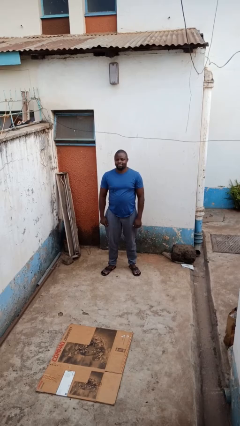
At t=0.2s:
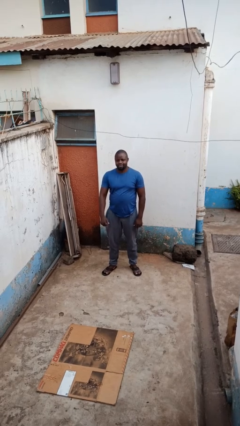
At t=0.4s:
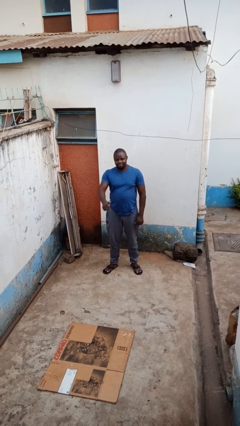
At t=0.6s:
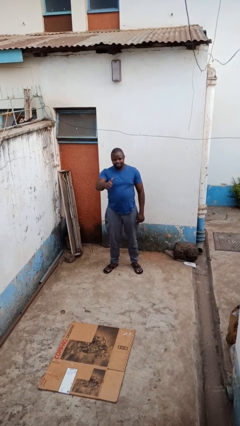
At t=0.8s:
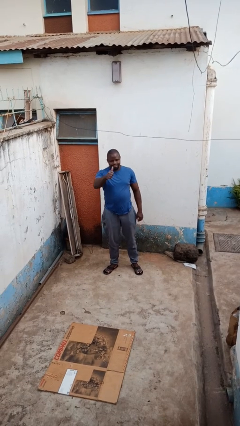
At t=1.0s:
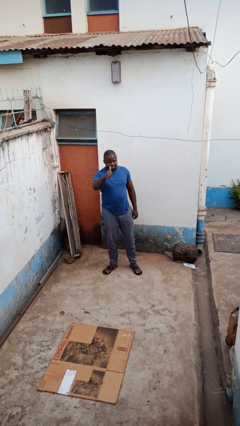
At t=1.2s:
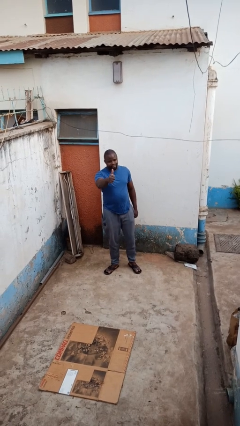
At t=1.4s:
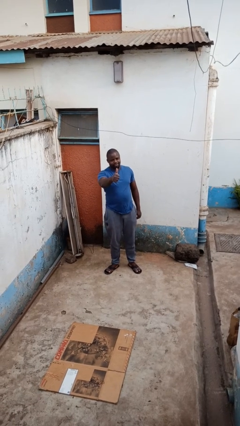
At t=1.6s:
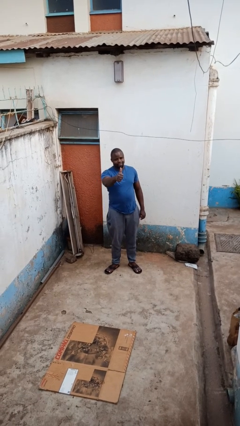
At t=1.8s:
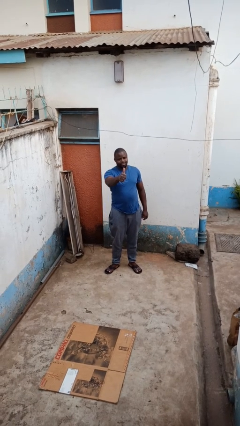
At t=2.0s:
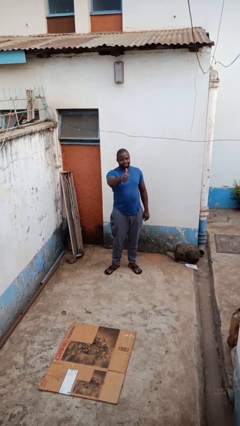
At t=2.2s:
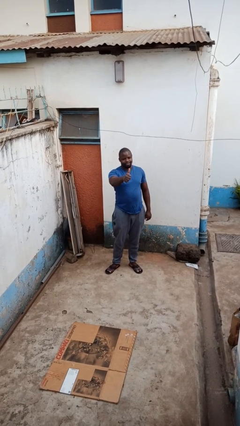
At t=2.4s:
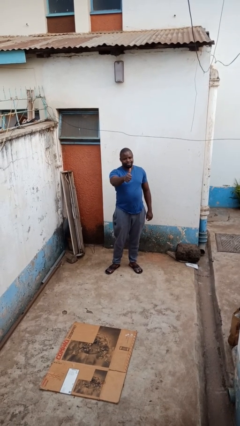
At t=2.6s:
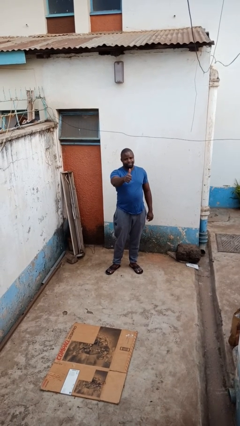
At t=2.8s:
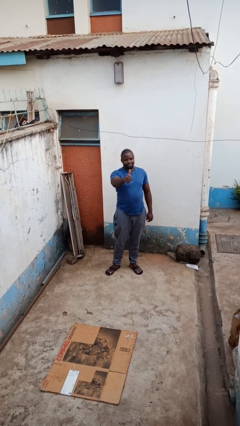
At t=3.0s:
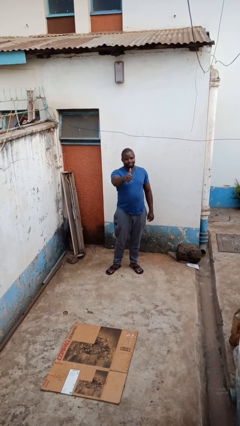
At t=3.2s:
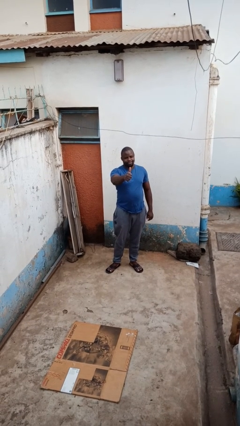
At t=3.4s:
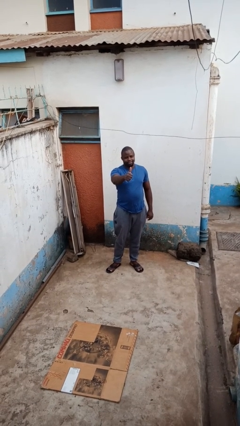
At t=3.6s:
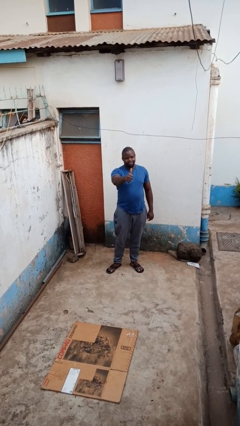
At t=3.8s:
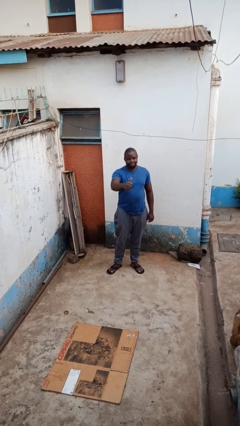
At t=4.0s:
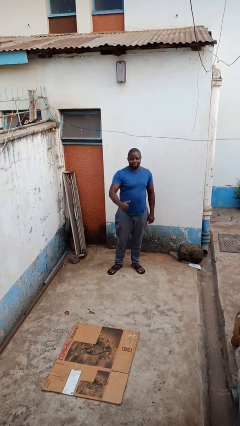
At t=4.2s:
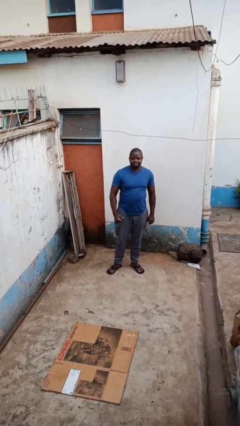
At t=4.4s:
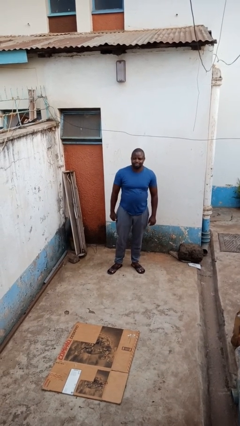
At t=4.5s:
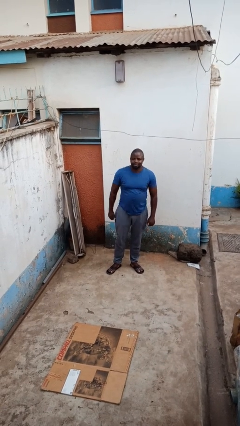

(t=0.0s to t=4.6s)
person gestures thumbs up

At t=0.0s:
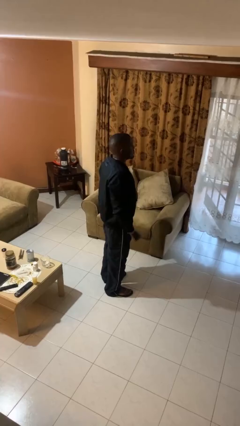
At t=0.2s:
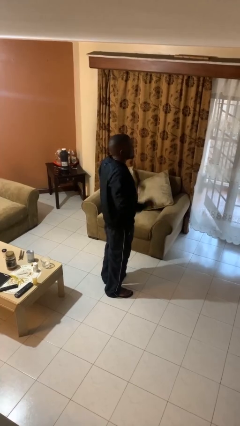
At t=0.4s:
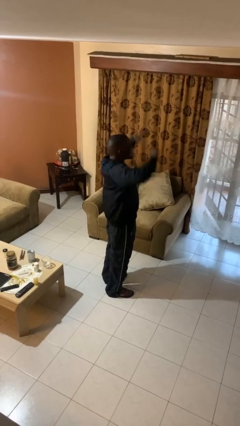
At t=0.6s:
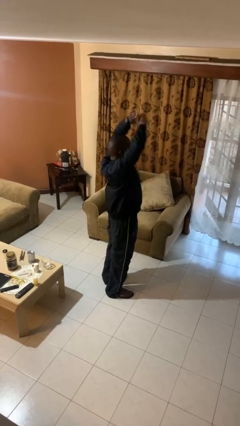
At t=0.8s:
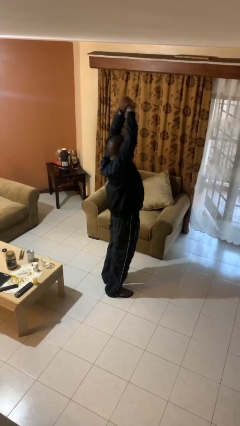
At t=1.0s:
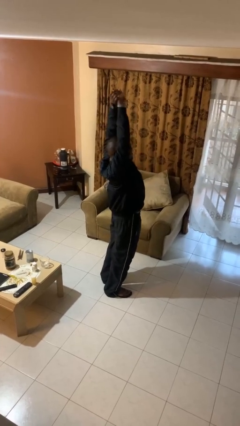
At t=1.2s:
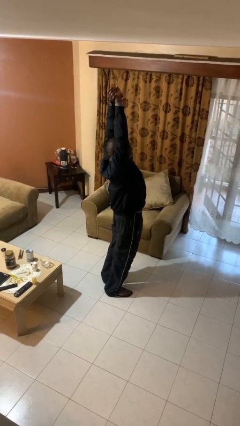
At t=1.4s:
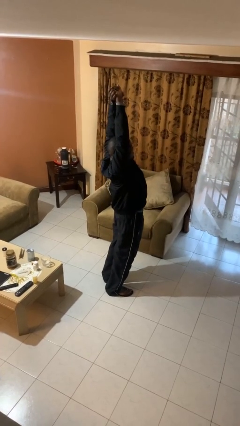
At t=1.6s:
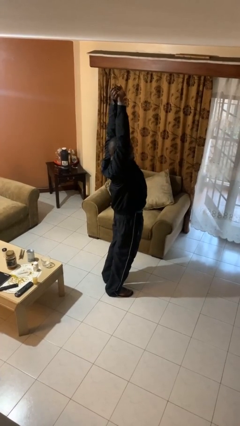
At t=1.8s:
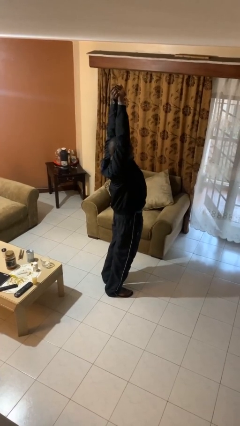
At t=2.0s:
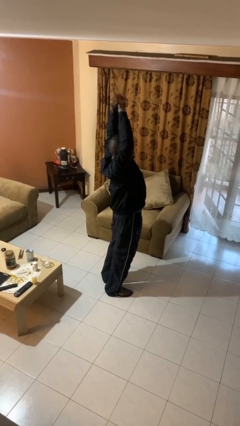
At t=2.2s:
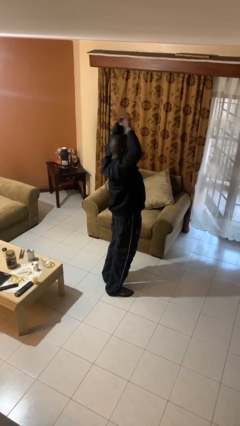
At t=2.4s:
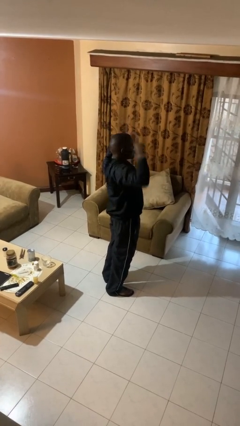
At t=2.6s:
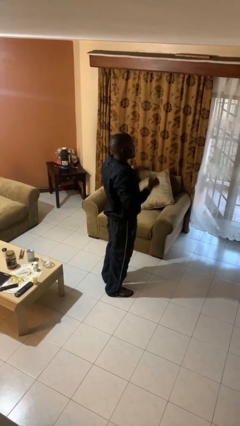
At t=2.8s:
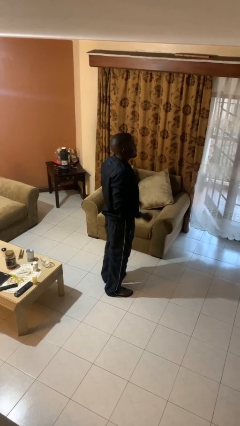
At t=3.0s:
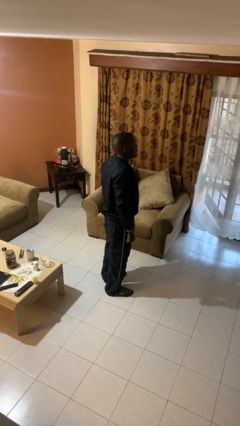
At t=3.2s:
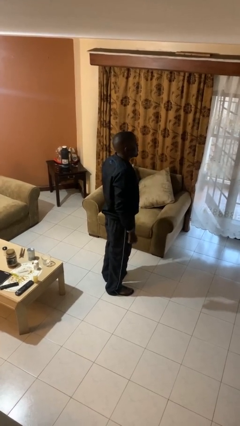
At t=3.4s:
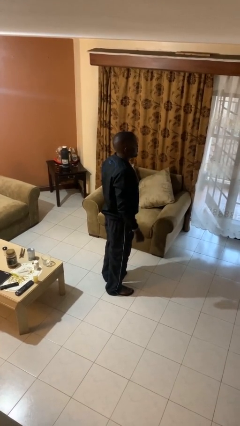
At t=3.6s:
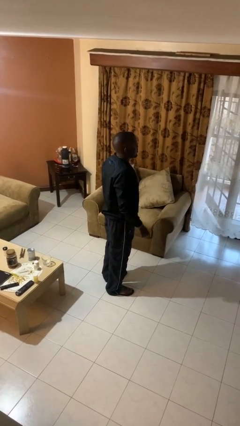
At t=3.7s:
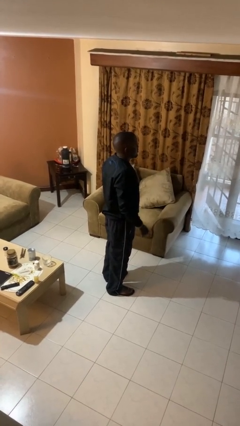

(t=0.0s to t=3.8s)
person stretches arms over head

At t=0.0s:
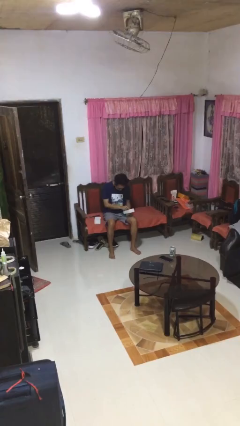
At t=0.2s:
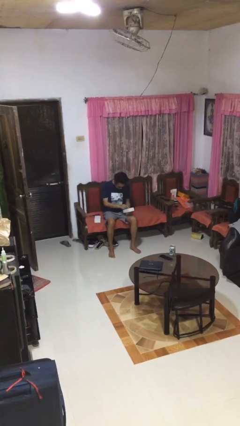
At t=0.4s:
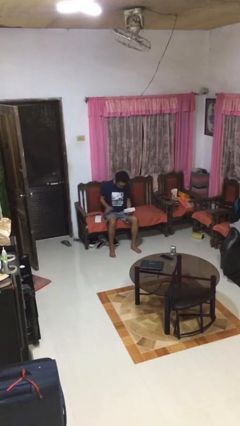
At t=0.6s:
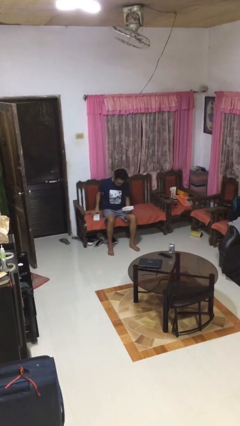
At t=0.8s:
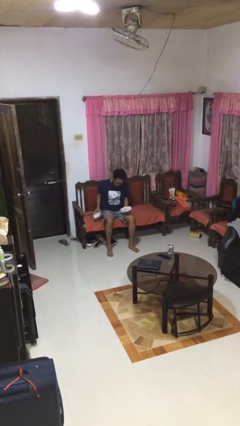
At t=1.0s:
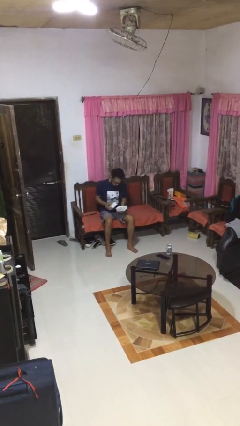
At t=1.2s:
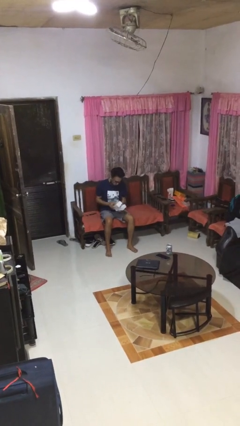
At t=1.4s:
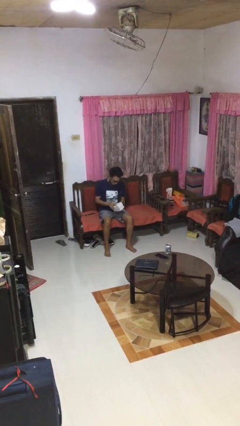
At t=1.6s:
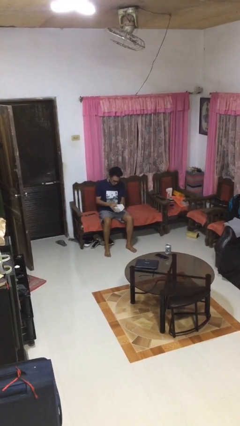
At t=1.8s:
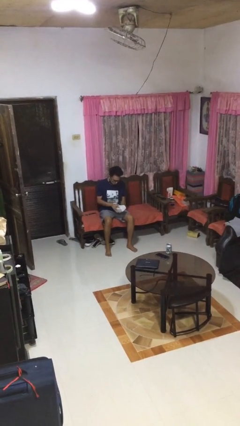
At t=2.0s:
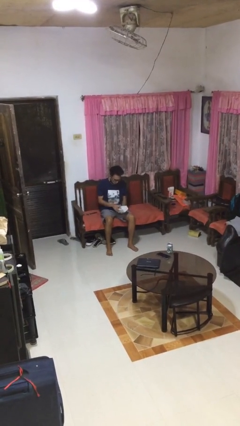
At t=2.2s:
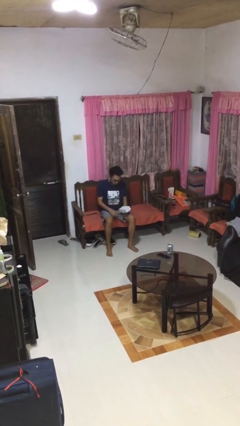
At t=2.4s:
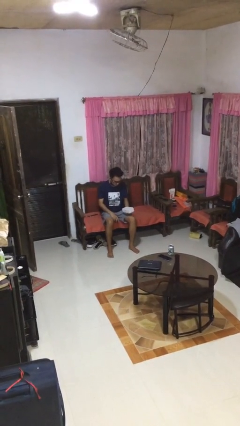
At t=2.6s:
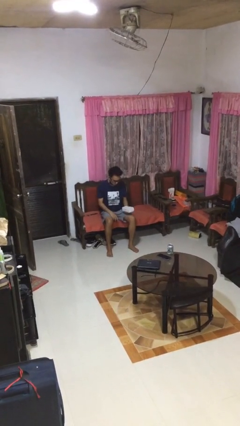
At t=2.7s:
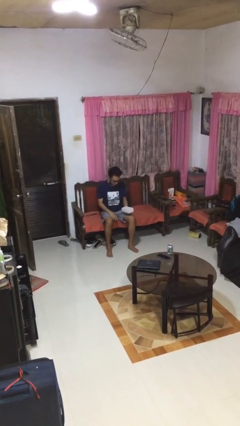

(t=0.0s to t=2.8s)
person closes jewelry box

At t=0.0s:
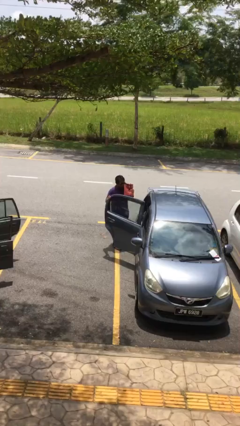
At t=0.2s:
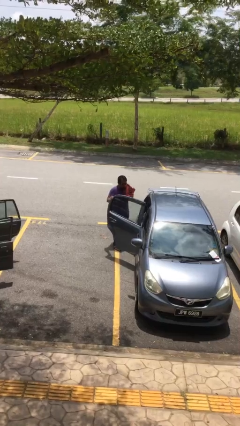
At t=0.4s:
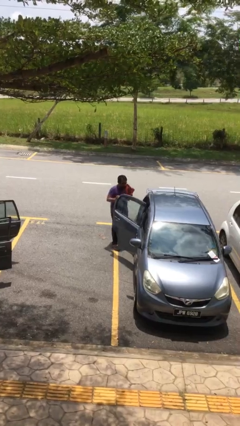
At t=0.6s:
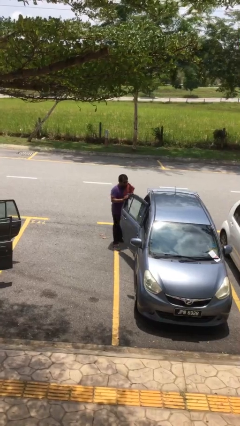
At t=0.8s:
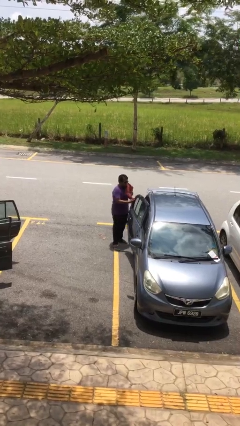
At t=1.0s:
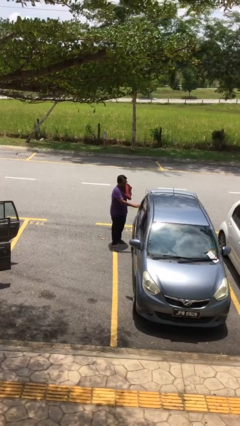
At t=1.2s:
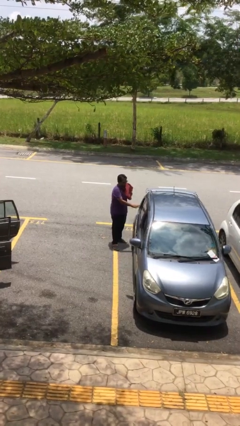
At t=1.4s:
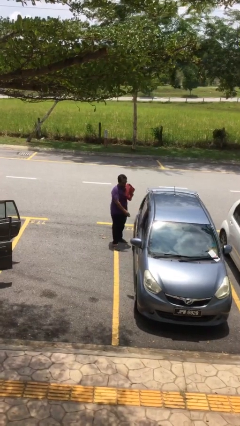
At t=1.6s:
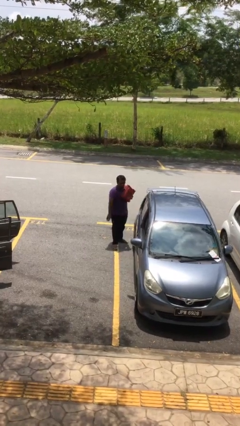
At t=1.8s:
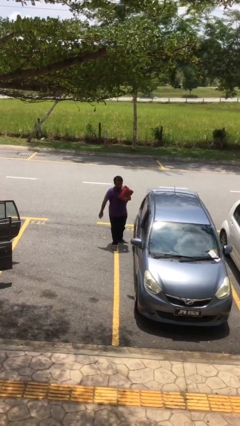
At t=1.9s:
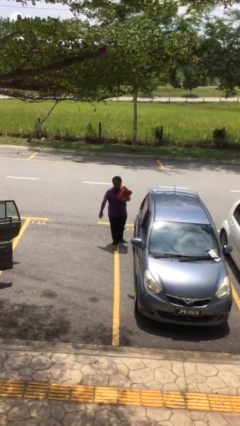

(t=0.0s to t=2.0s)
person closes car door

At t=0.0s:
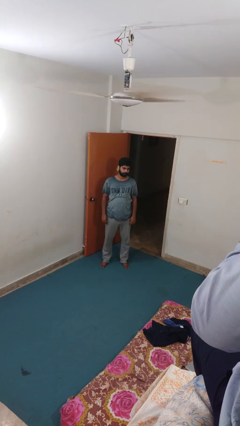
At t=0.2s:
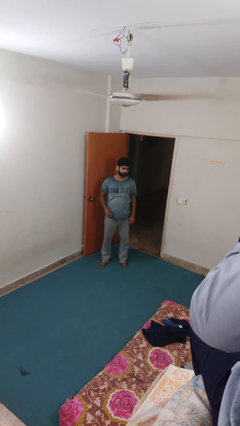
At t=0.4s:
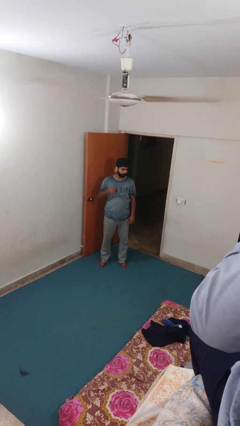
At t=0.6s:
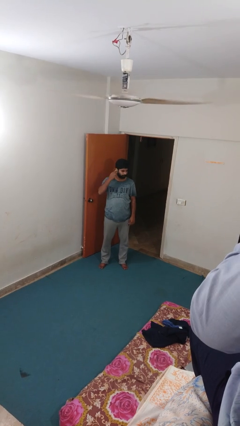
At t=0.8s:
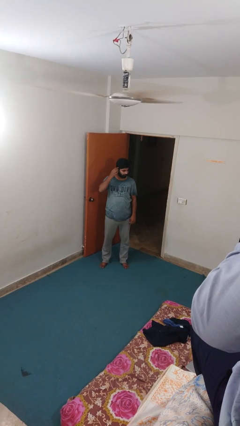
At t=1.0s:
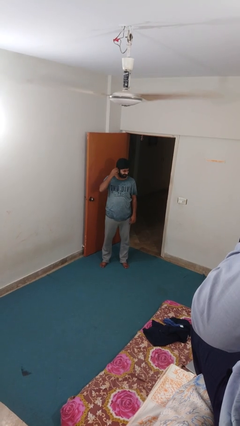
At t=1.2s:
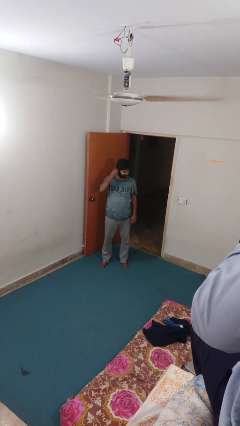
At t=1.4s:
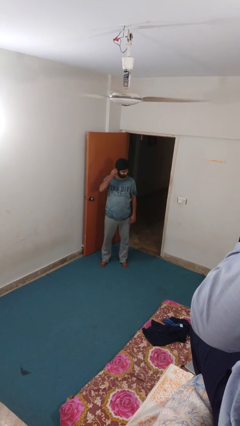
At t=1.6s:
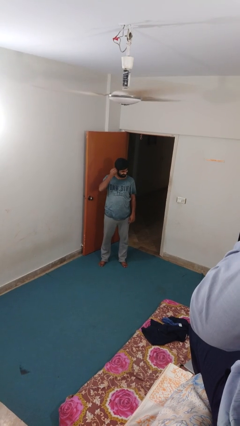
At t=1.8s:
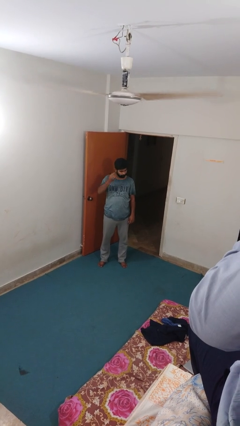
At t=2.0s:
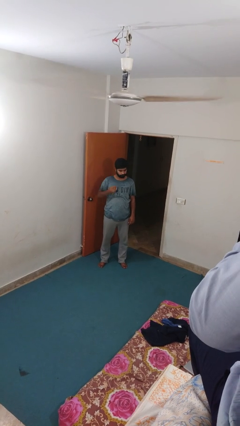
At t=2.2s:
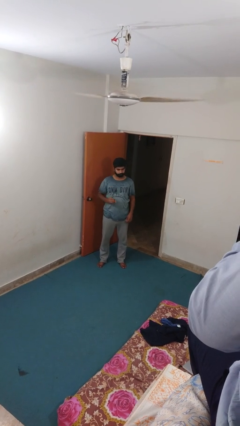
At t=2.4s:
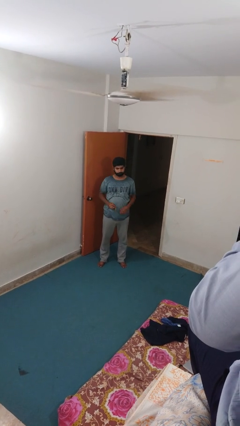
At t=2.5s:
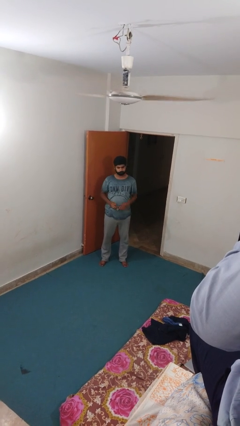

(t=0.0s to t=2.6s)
person takes off earrings

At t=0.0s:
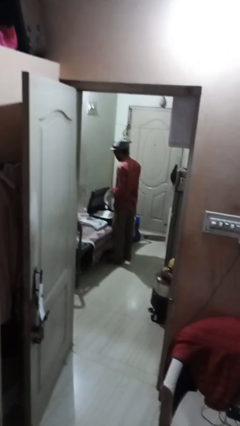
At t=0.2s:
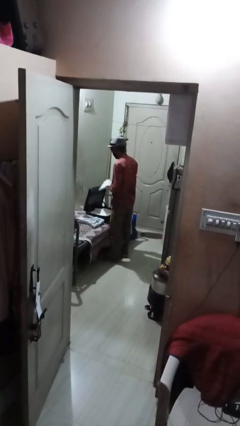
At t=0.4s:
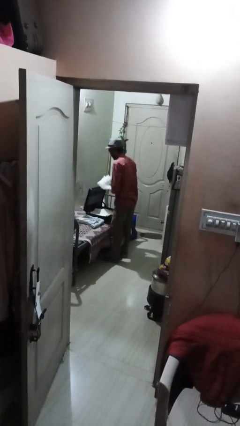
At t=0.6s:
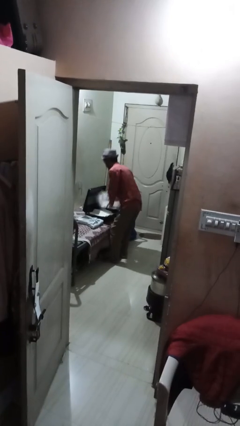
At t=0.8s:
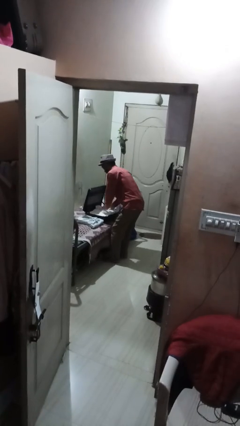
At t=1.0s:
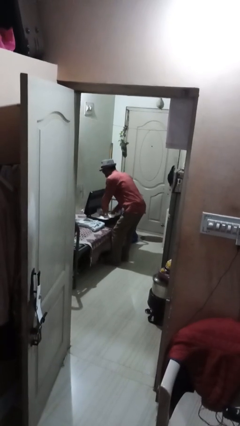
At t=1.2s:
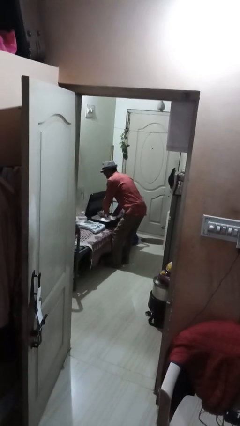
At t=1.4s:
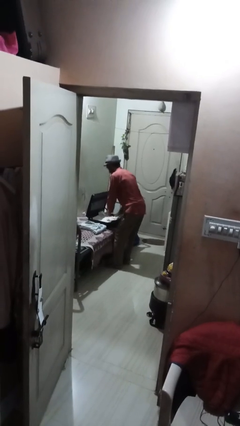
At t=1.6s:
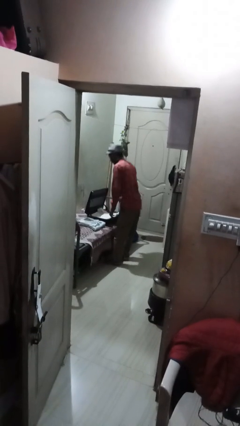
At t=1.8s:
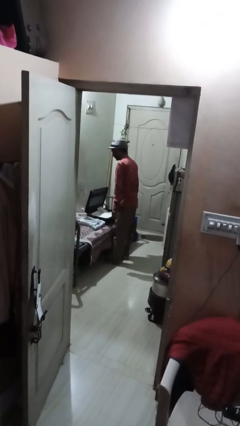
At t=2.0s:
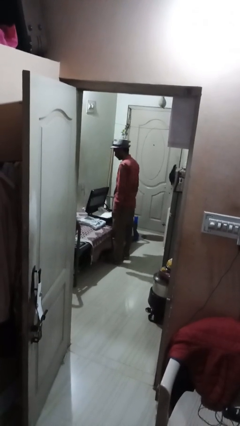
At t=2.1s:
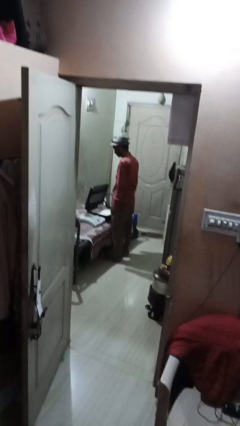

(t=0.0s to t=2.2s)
person loads clothes into suitcase
